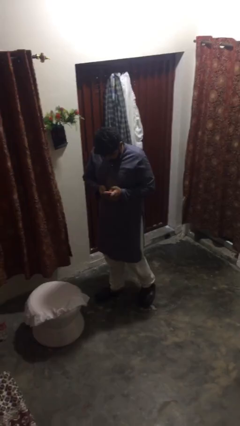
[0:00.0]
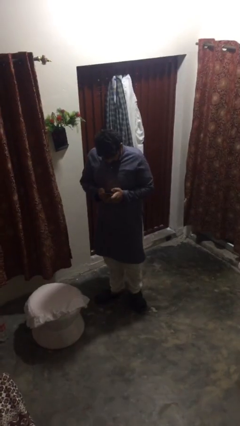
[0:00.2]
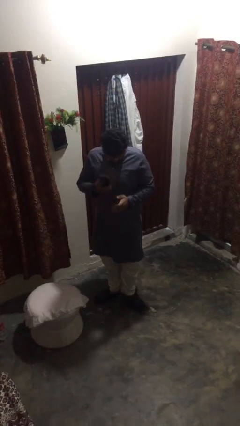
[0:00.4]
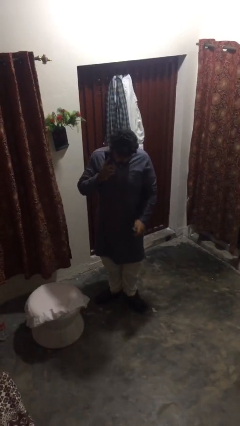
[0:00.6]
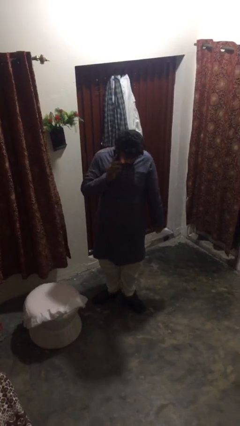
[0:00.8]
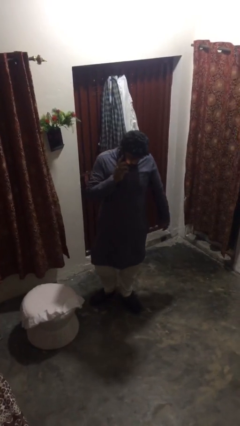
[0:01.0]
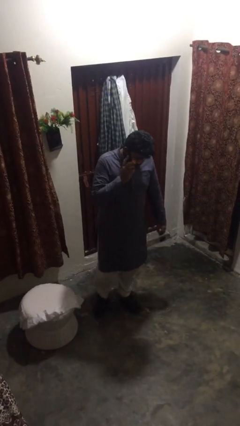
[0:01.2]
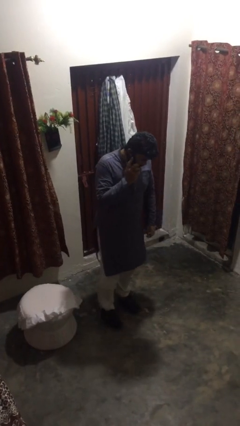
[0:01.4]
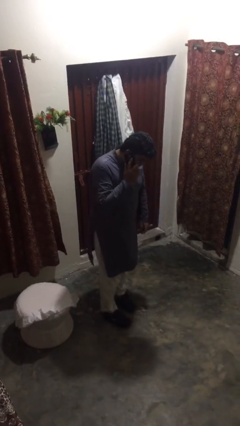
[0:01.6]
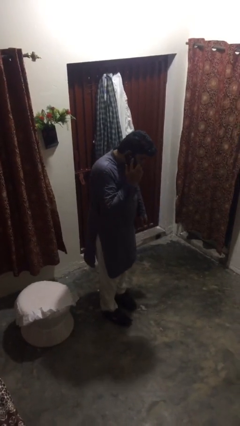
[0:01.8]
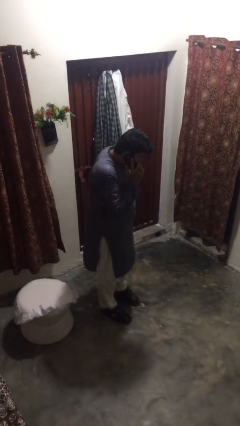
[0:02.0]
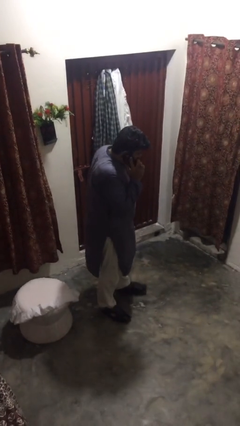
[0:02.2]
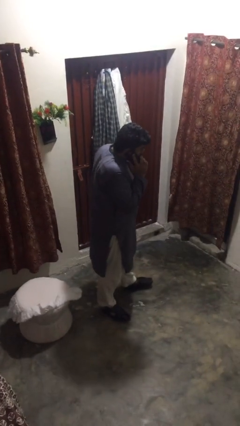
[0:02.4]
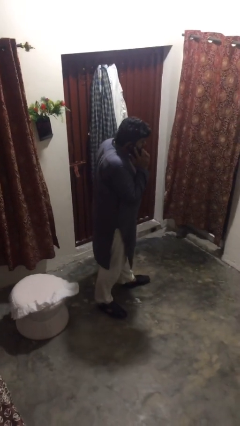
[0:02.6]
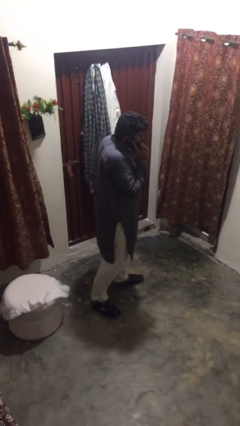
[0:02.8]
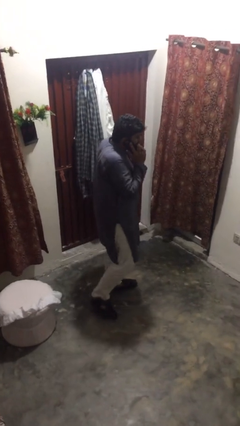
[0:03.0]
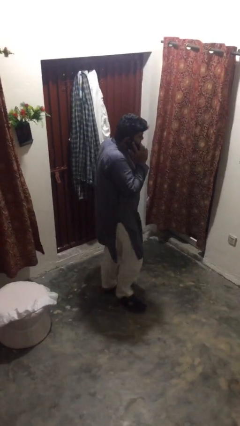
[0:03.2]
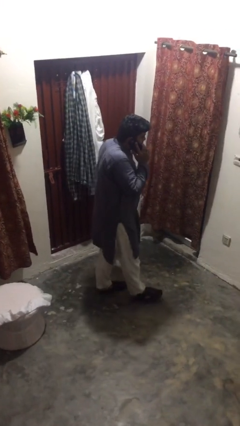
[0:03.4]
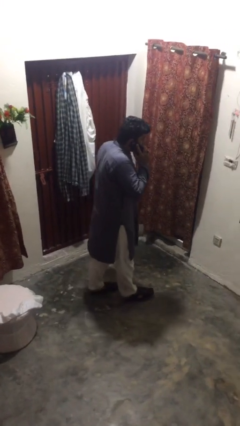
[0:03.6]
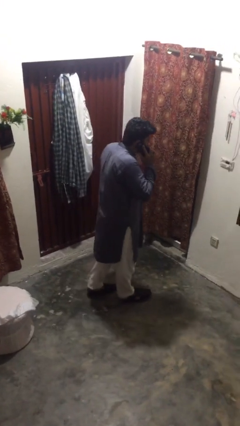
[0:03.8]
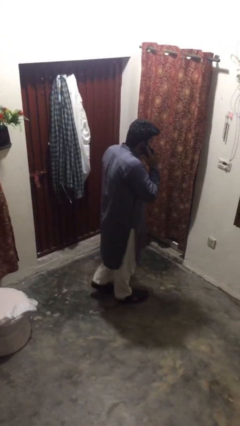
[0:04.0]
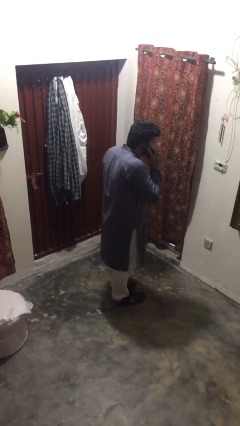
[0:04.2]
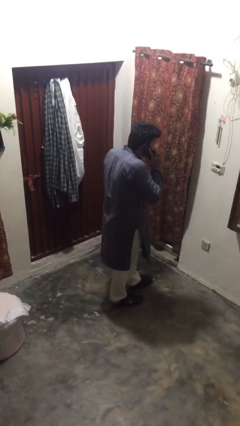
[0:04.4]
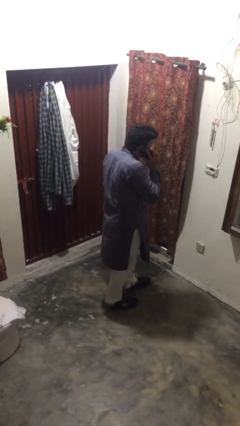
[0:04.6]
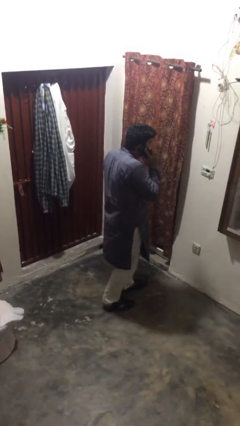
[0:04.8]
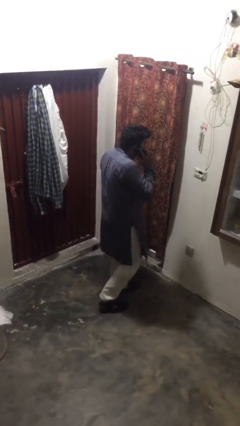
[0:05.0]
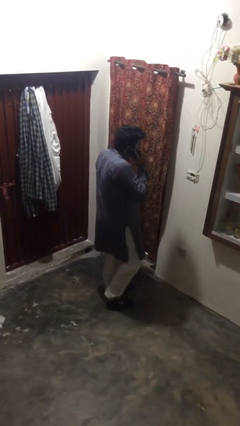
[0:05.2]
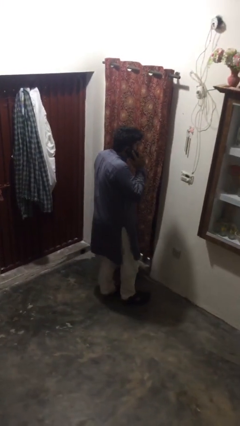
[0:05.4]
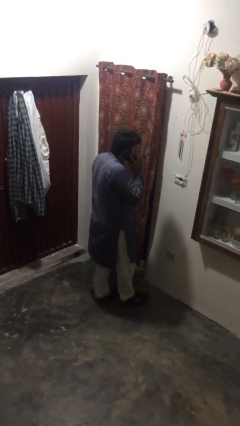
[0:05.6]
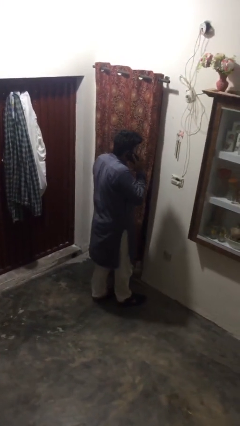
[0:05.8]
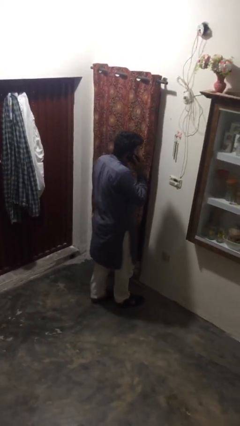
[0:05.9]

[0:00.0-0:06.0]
person talks on phone

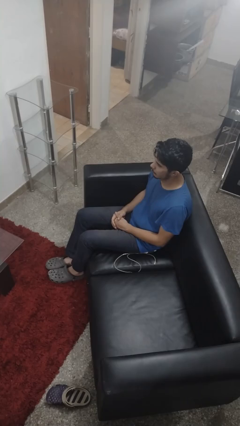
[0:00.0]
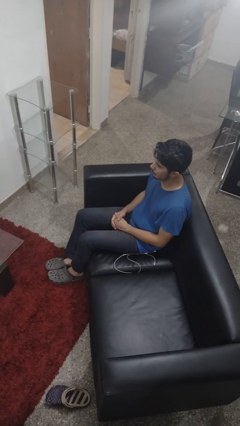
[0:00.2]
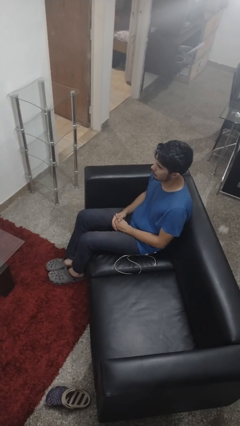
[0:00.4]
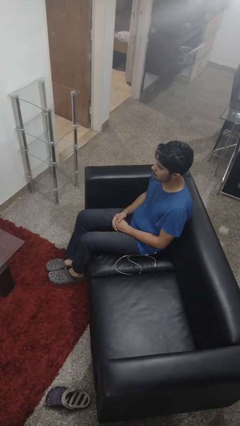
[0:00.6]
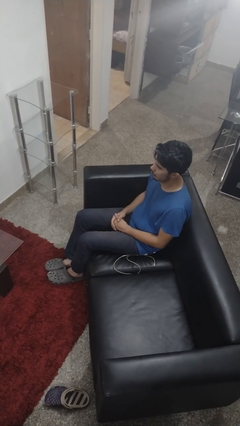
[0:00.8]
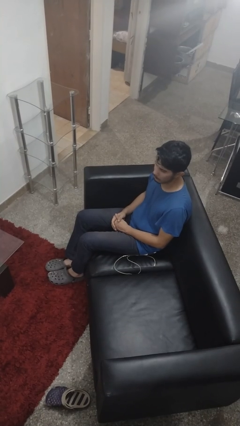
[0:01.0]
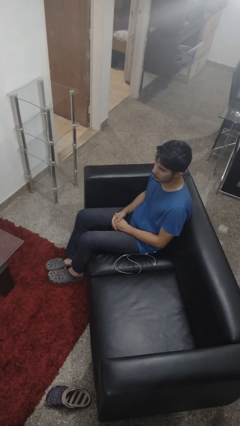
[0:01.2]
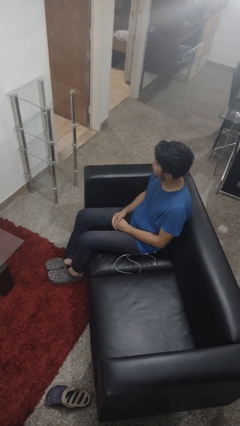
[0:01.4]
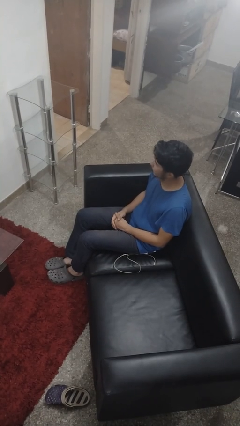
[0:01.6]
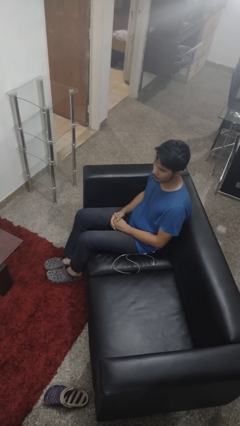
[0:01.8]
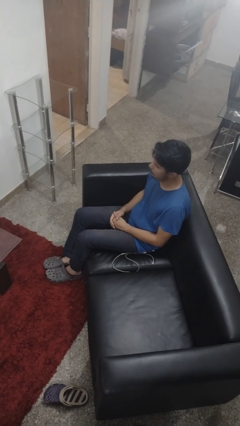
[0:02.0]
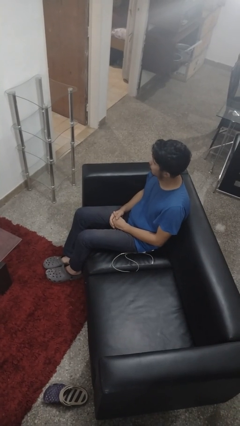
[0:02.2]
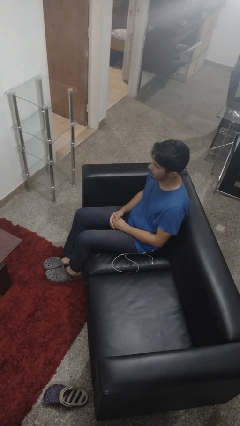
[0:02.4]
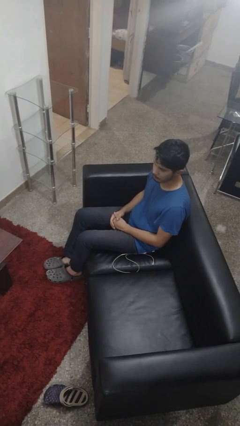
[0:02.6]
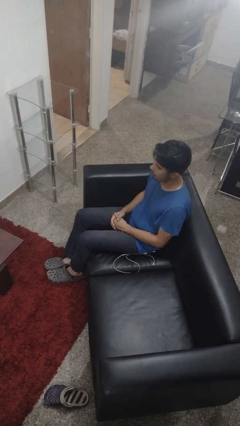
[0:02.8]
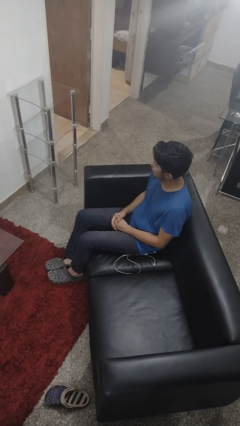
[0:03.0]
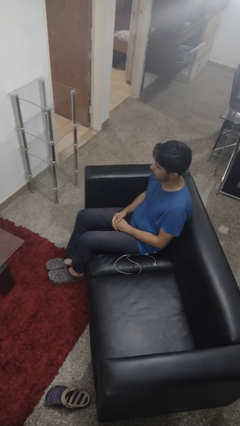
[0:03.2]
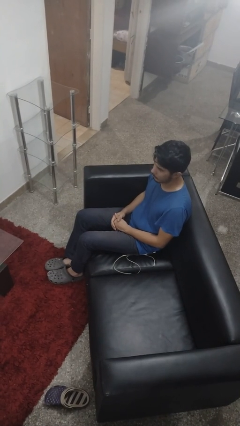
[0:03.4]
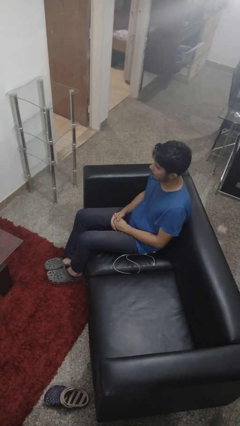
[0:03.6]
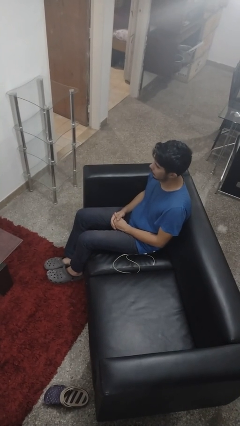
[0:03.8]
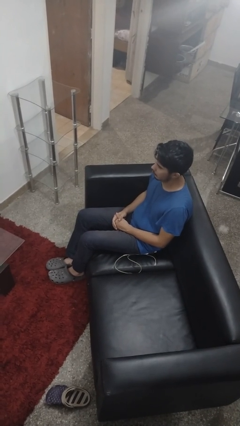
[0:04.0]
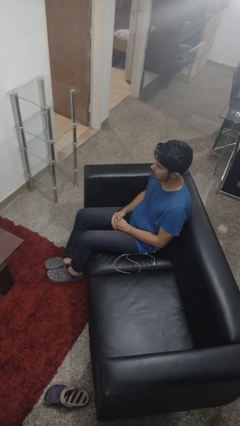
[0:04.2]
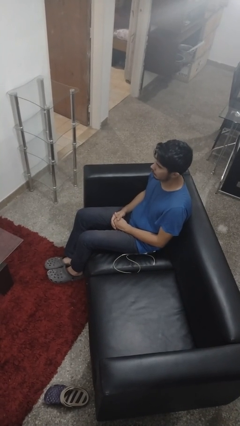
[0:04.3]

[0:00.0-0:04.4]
person shakes head

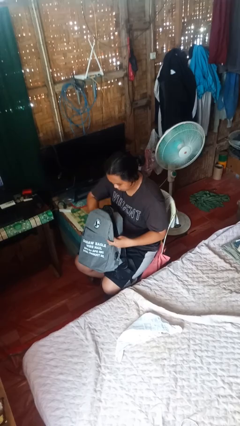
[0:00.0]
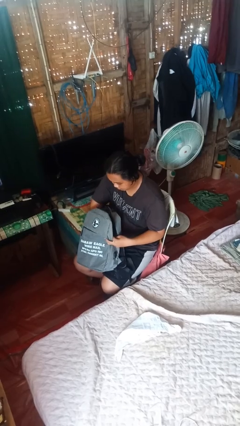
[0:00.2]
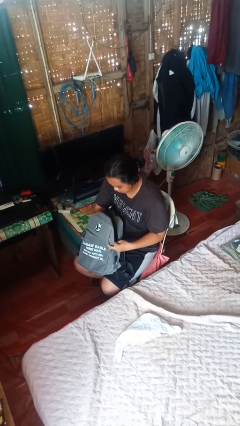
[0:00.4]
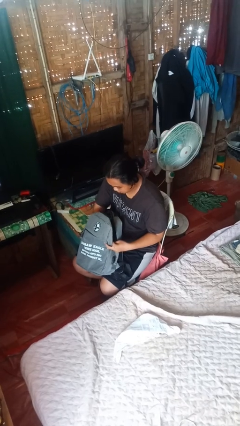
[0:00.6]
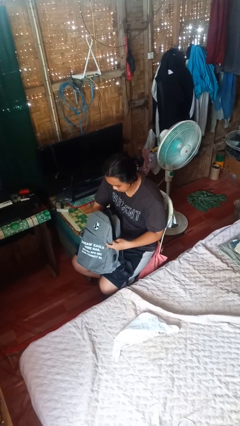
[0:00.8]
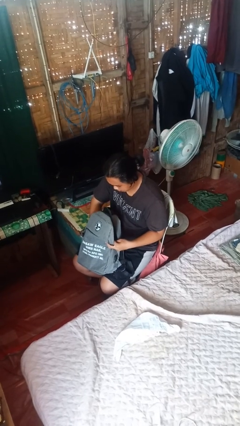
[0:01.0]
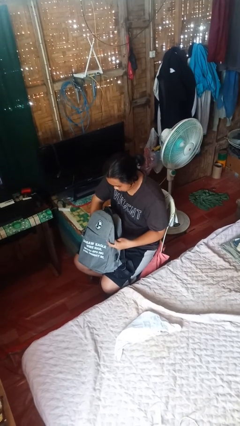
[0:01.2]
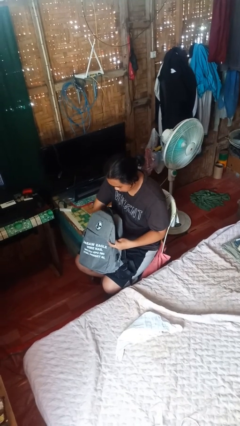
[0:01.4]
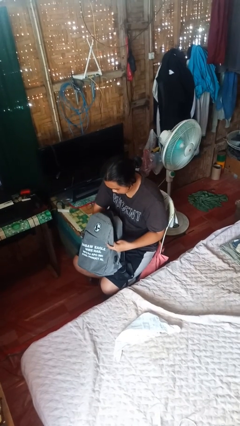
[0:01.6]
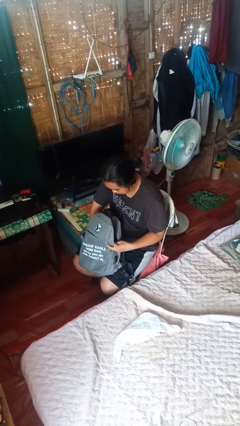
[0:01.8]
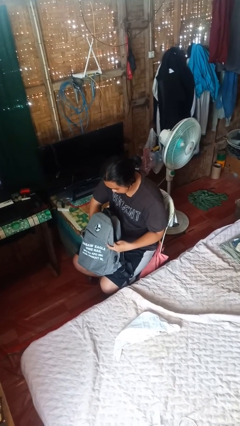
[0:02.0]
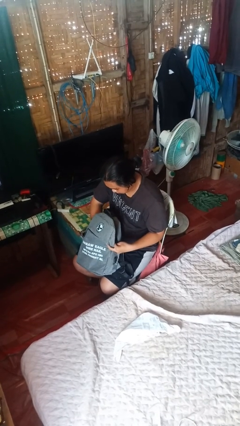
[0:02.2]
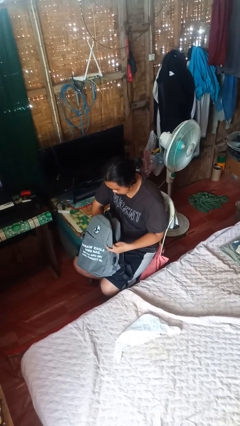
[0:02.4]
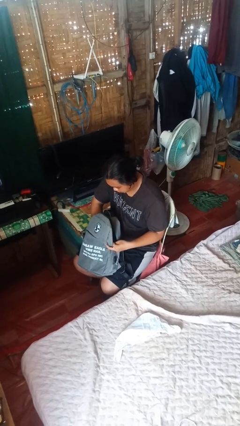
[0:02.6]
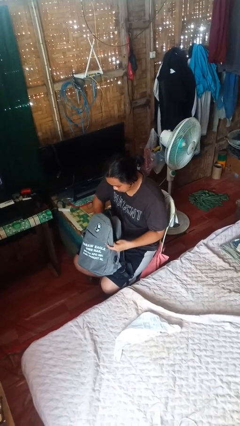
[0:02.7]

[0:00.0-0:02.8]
person searches in backpack

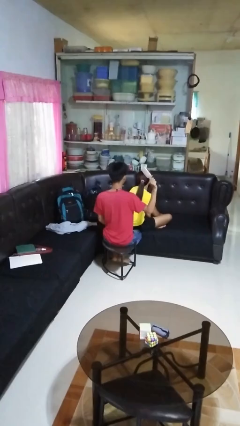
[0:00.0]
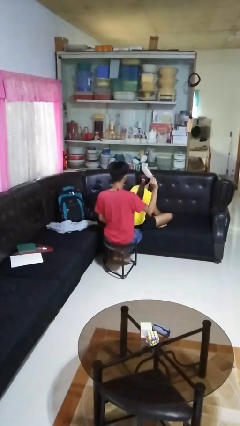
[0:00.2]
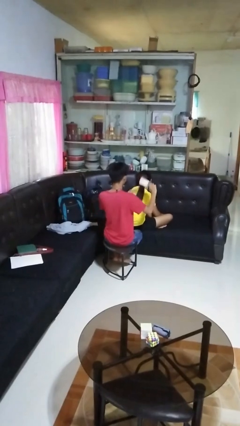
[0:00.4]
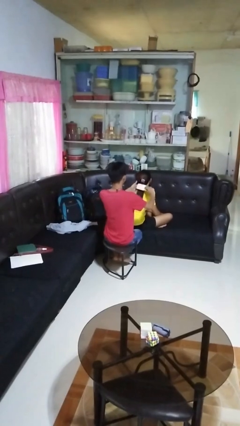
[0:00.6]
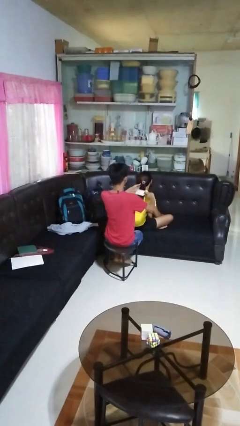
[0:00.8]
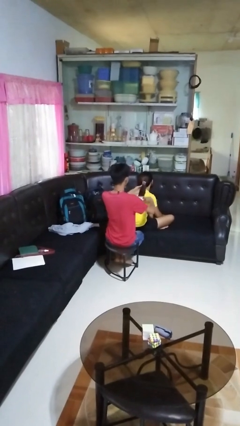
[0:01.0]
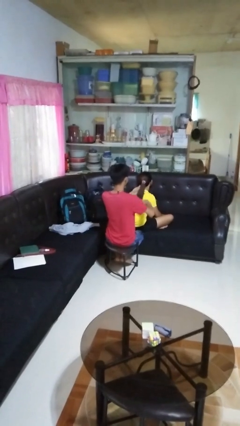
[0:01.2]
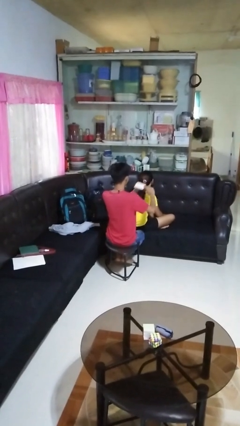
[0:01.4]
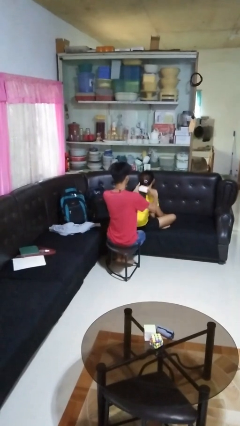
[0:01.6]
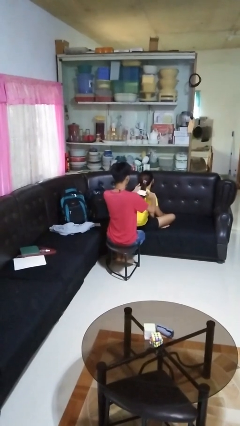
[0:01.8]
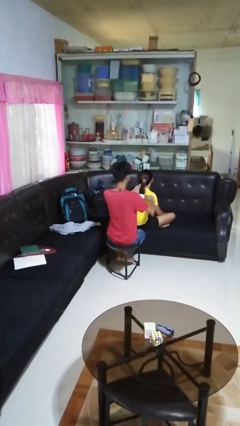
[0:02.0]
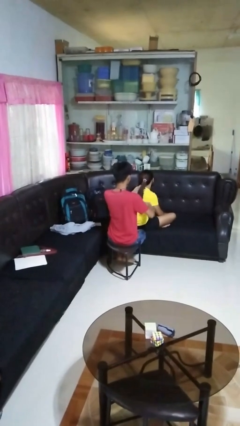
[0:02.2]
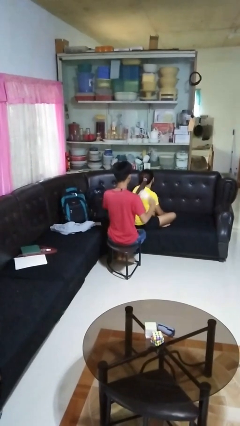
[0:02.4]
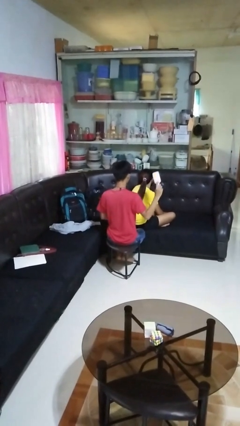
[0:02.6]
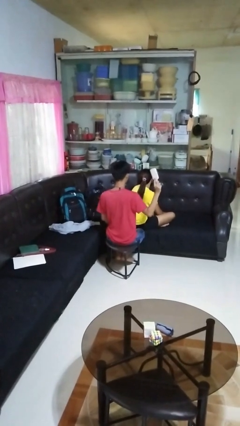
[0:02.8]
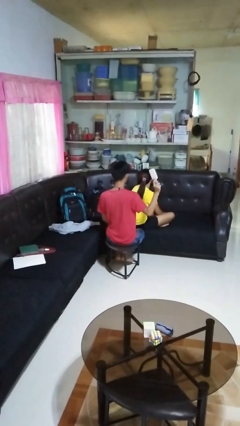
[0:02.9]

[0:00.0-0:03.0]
person brushes hair of person

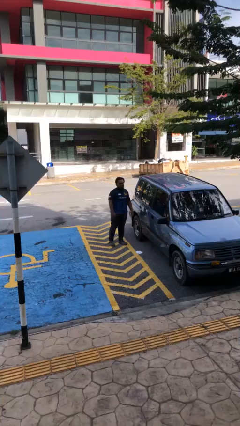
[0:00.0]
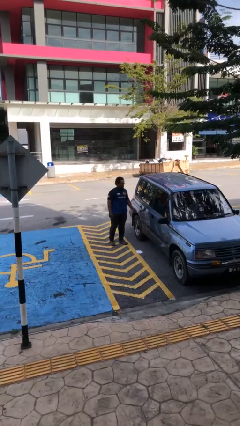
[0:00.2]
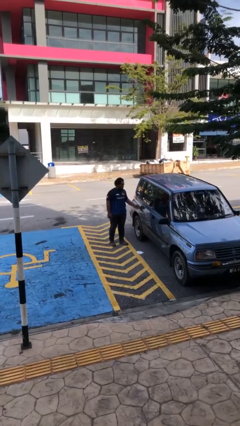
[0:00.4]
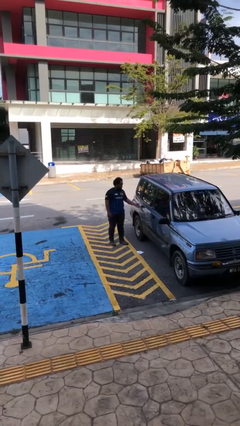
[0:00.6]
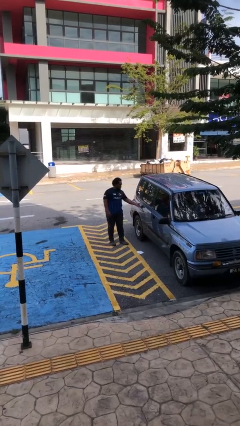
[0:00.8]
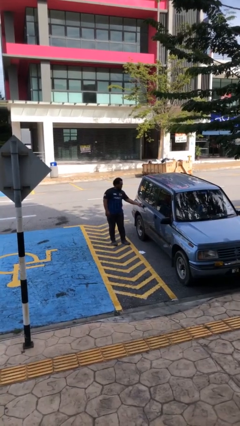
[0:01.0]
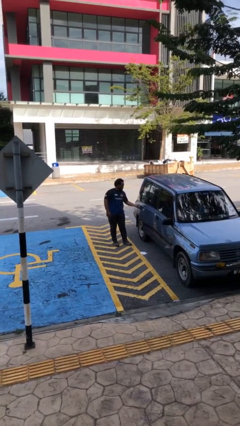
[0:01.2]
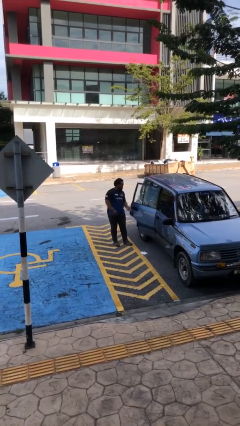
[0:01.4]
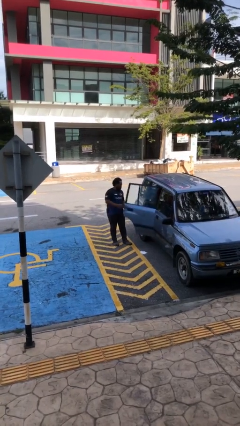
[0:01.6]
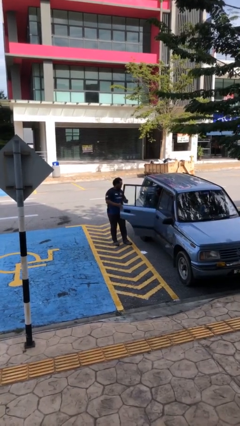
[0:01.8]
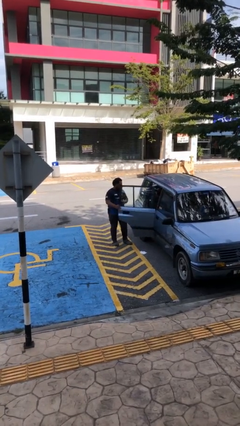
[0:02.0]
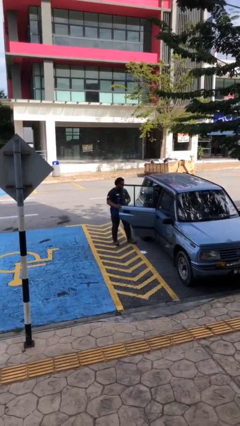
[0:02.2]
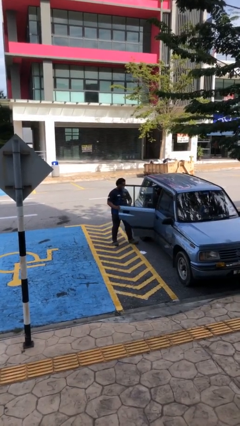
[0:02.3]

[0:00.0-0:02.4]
person opens car door
